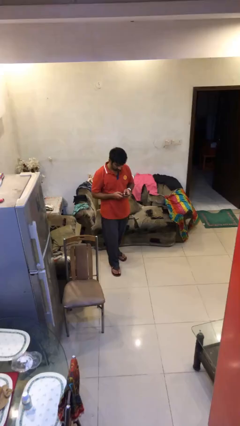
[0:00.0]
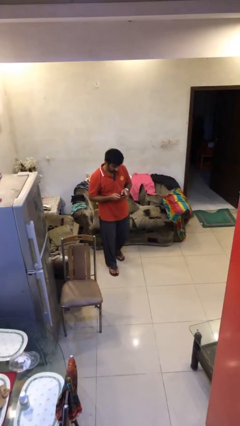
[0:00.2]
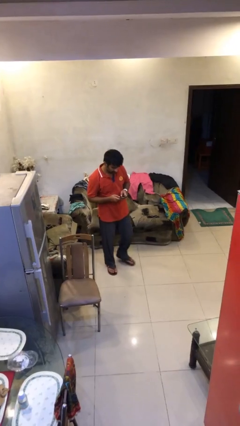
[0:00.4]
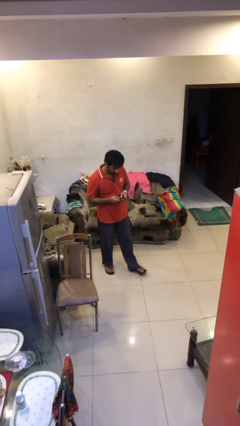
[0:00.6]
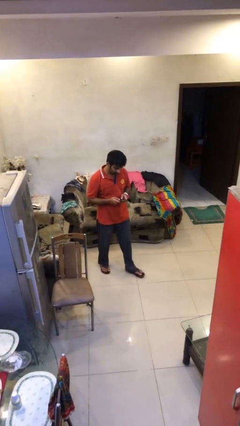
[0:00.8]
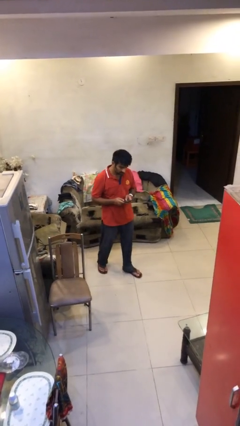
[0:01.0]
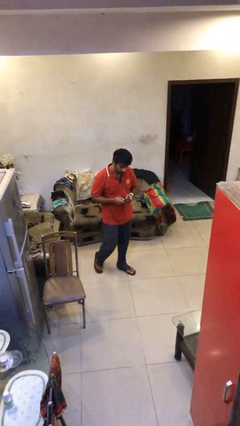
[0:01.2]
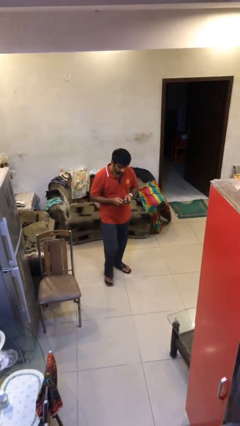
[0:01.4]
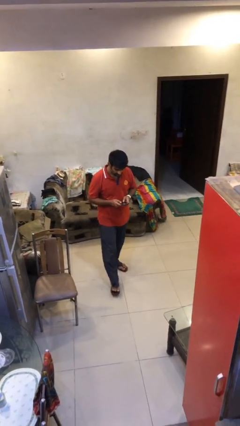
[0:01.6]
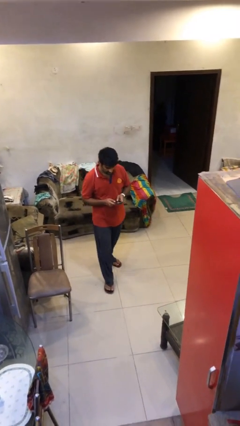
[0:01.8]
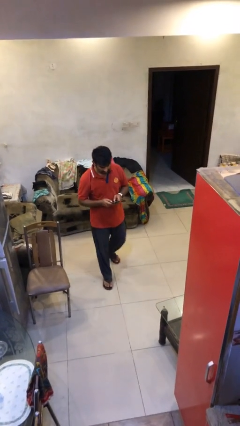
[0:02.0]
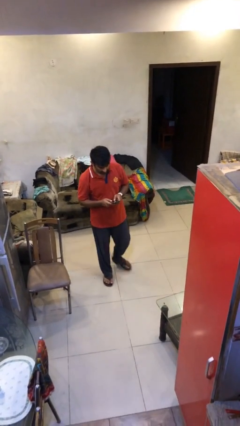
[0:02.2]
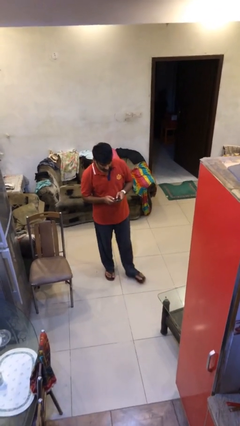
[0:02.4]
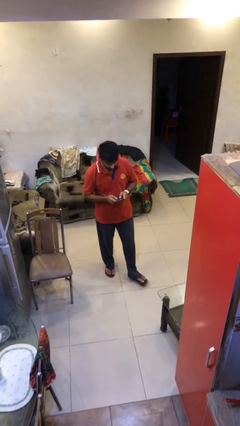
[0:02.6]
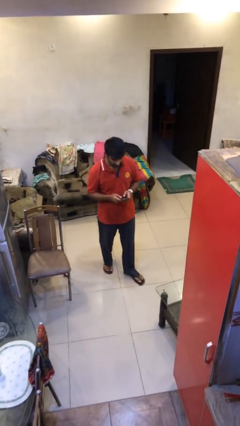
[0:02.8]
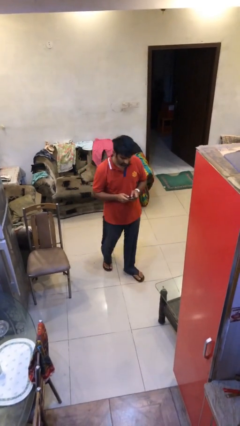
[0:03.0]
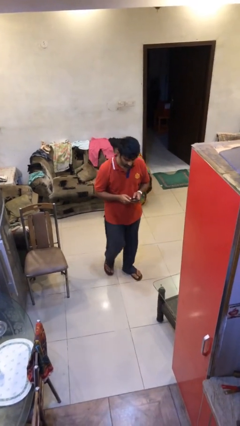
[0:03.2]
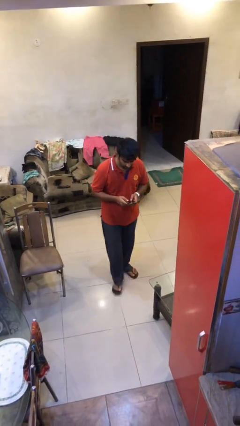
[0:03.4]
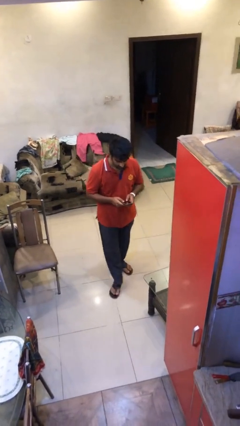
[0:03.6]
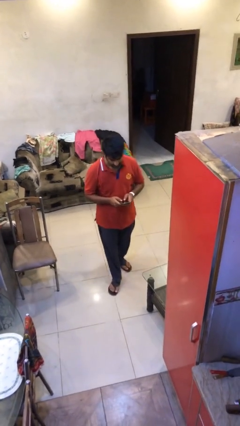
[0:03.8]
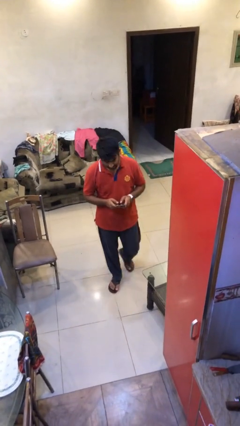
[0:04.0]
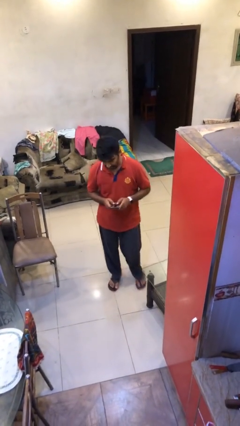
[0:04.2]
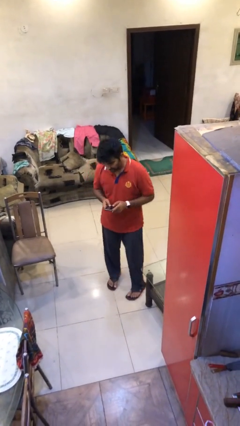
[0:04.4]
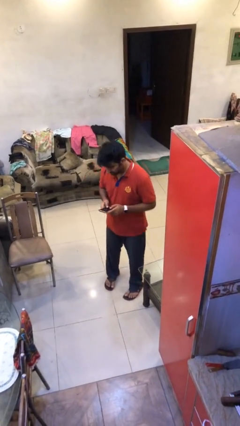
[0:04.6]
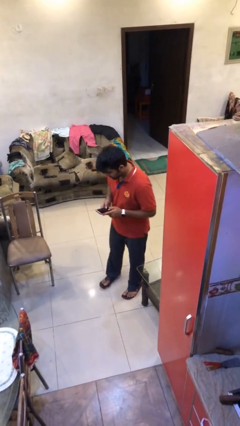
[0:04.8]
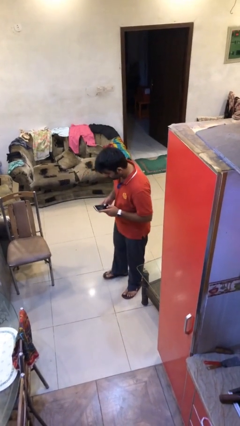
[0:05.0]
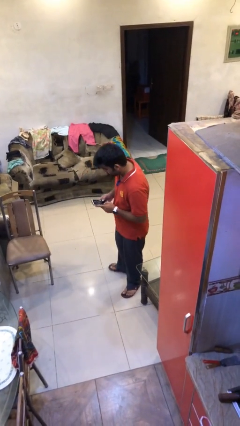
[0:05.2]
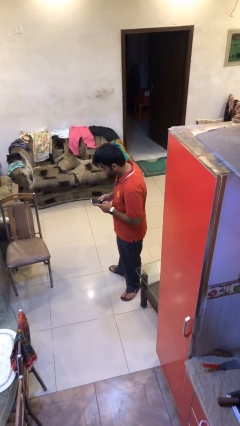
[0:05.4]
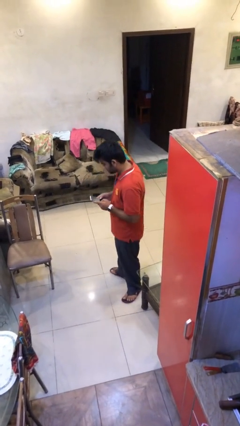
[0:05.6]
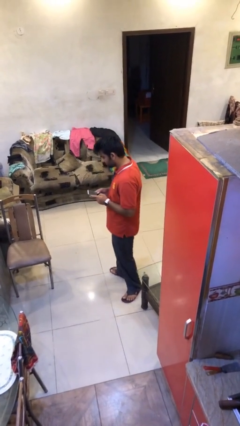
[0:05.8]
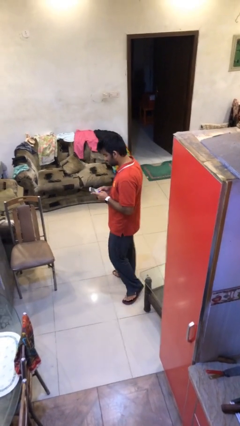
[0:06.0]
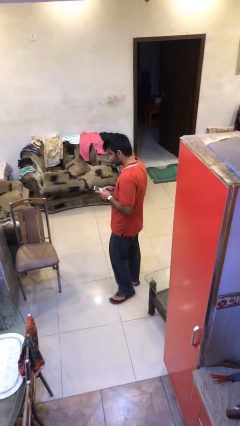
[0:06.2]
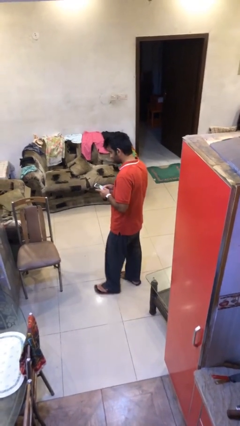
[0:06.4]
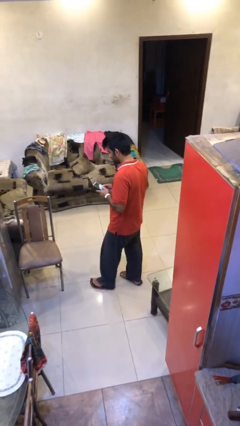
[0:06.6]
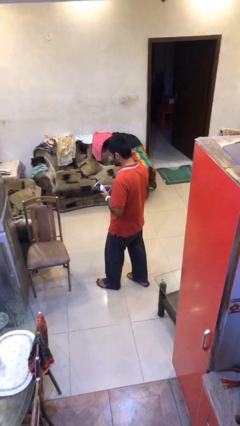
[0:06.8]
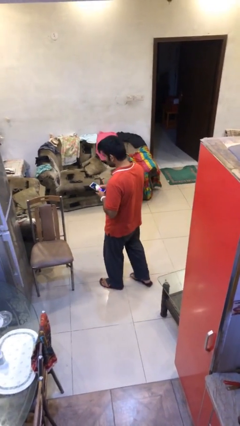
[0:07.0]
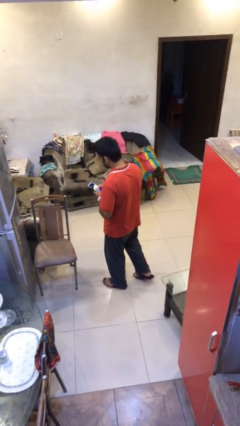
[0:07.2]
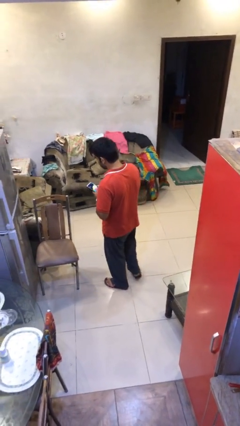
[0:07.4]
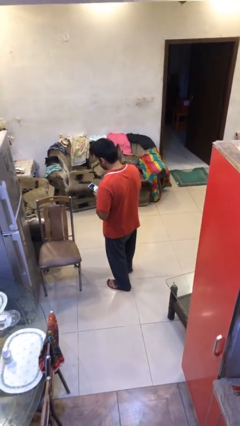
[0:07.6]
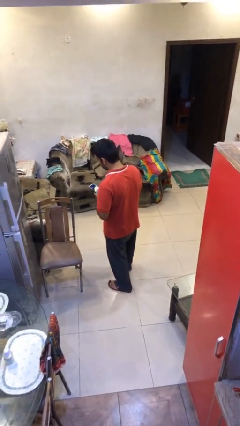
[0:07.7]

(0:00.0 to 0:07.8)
person texts on phone

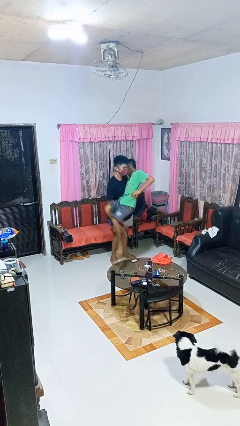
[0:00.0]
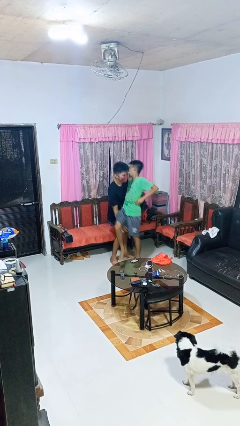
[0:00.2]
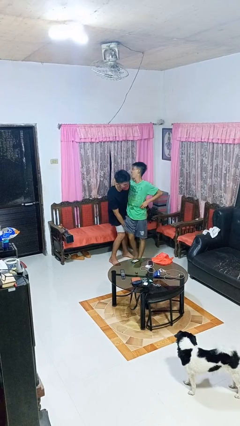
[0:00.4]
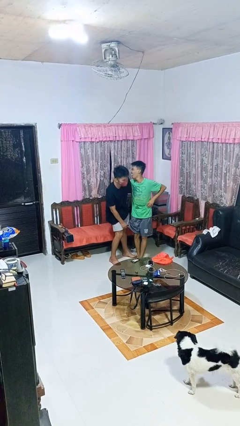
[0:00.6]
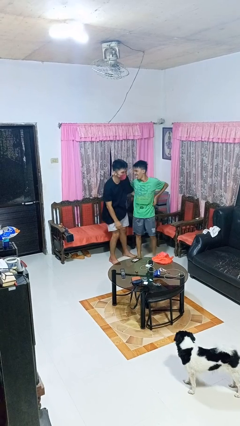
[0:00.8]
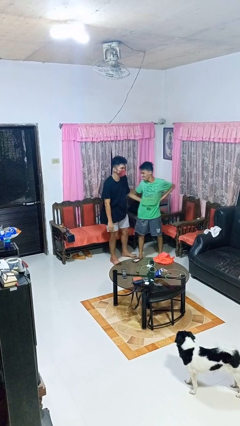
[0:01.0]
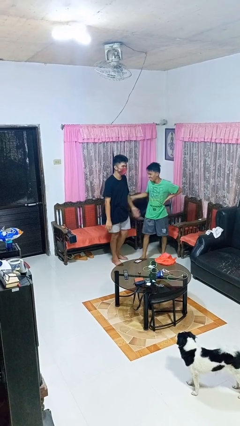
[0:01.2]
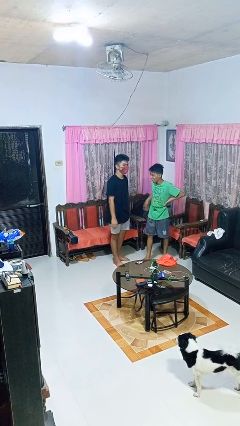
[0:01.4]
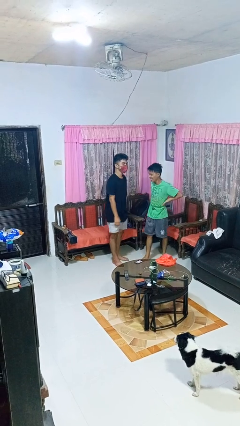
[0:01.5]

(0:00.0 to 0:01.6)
person puts down person

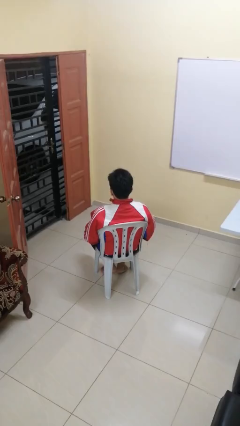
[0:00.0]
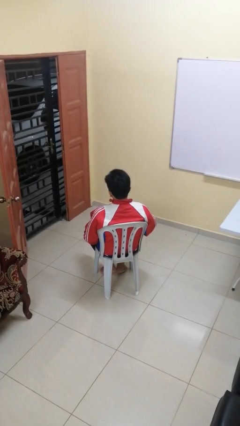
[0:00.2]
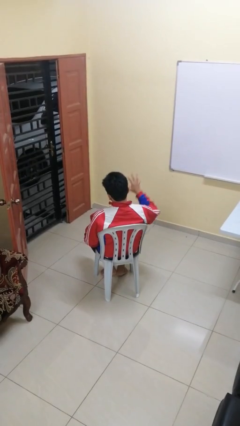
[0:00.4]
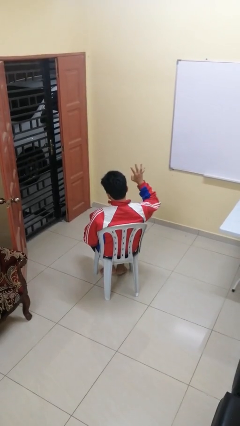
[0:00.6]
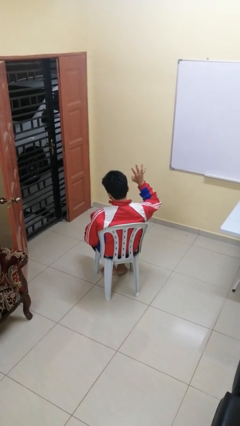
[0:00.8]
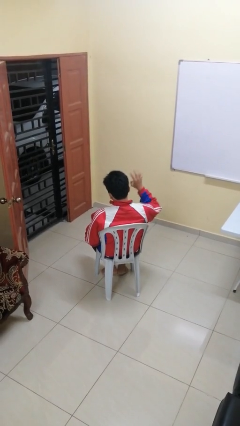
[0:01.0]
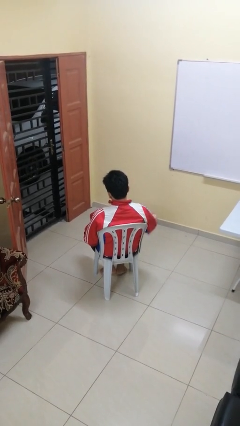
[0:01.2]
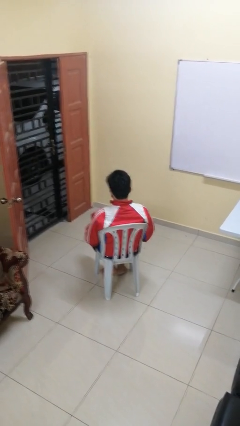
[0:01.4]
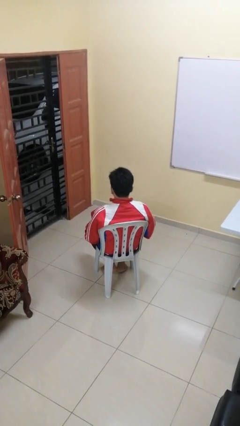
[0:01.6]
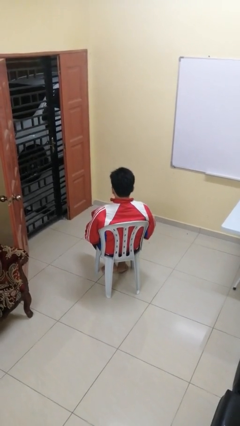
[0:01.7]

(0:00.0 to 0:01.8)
person gestures number four

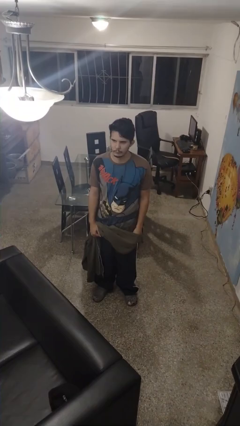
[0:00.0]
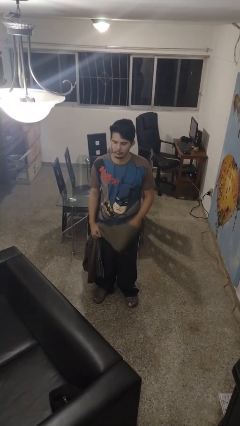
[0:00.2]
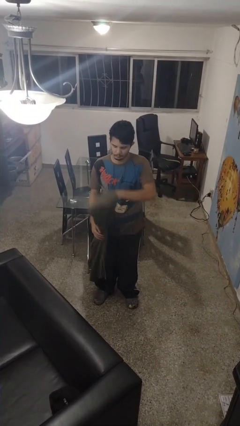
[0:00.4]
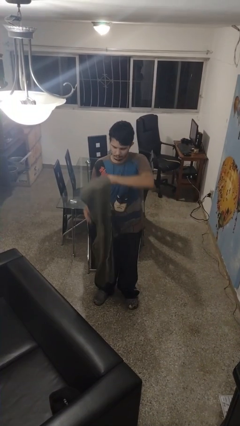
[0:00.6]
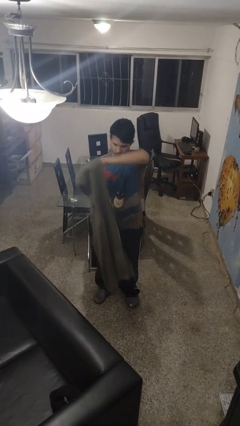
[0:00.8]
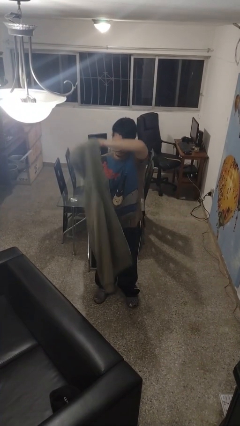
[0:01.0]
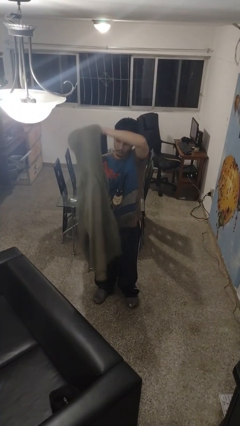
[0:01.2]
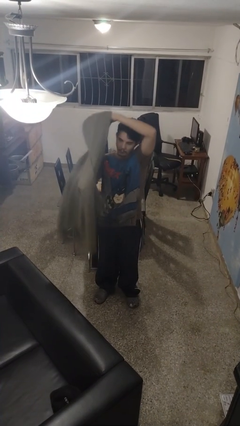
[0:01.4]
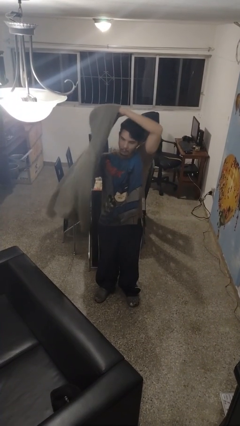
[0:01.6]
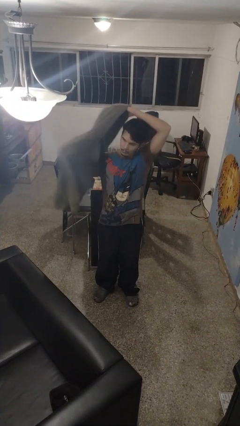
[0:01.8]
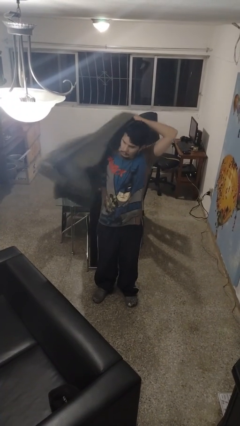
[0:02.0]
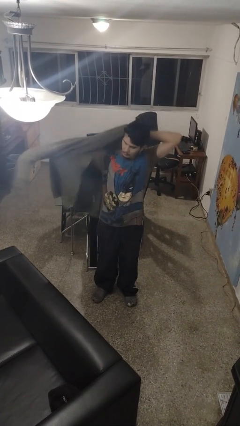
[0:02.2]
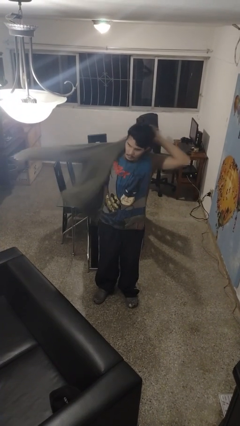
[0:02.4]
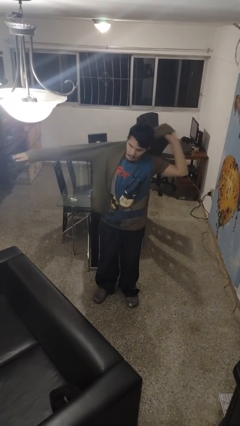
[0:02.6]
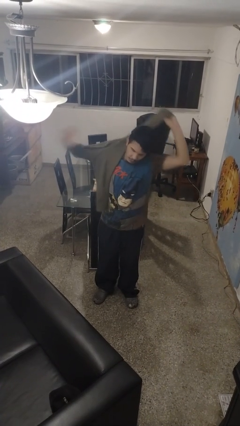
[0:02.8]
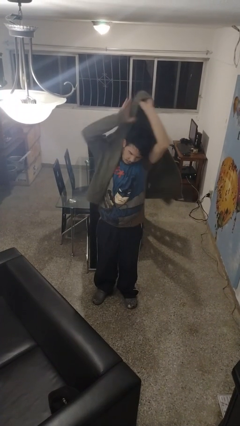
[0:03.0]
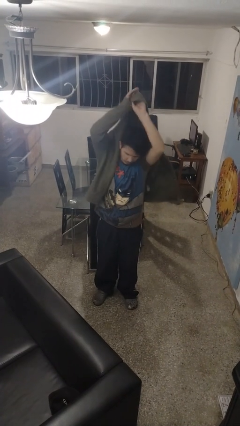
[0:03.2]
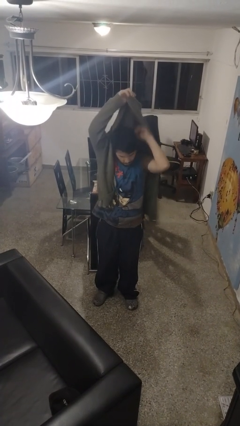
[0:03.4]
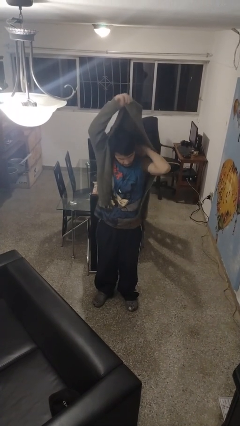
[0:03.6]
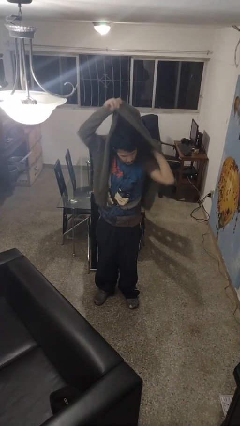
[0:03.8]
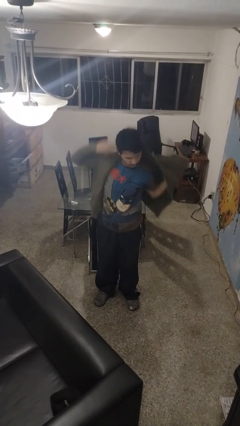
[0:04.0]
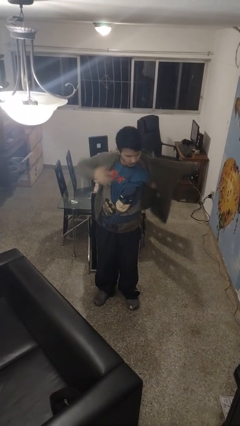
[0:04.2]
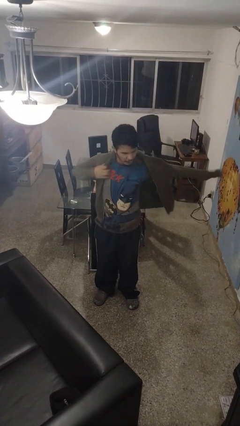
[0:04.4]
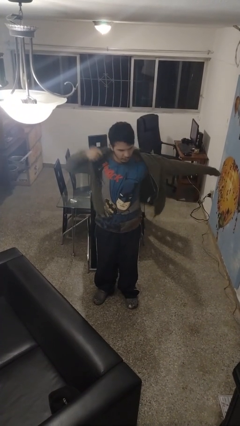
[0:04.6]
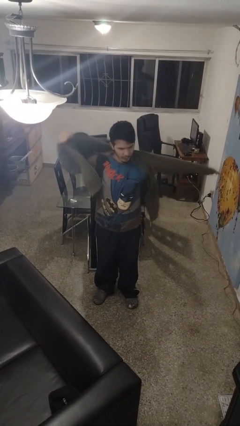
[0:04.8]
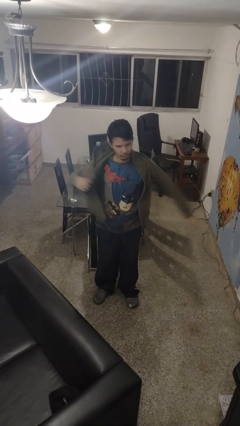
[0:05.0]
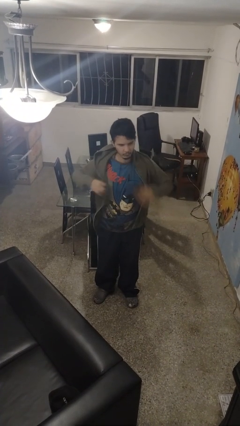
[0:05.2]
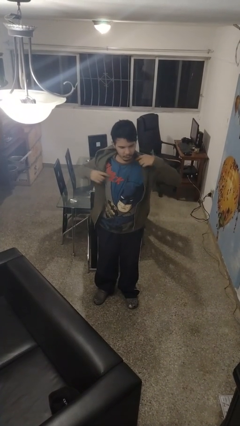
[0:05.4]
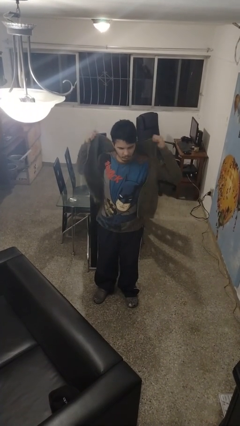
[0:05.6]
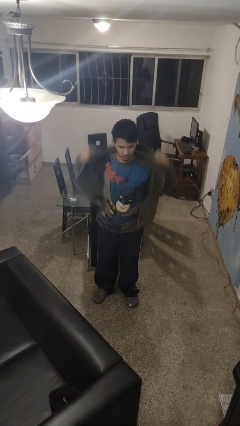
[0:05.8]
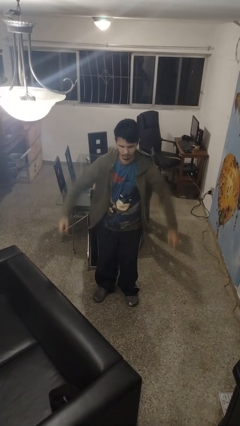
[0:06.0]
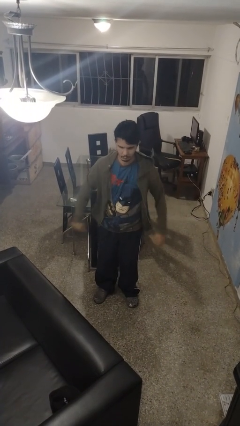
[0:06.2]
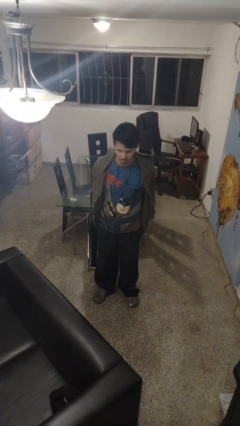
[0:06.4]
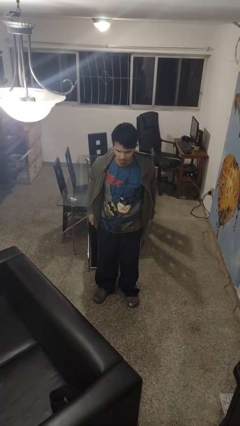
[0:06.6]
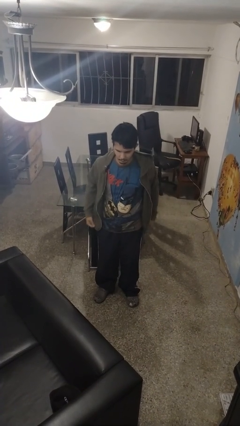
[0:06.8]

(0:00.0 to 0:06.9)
person puts on jacket
